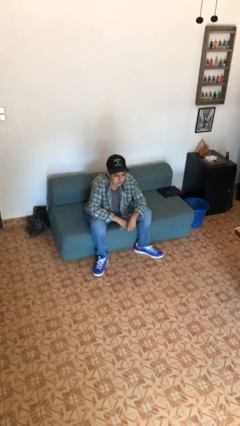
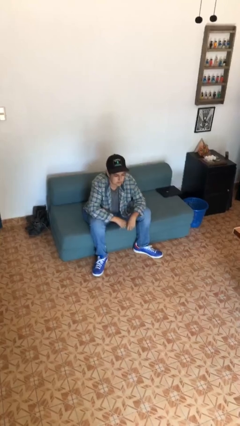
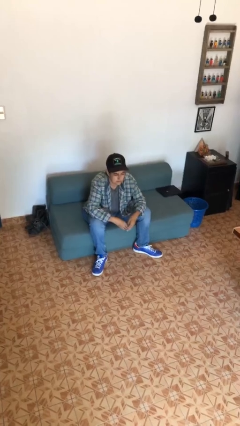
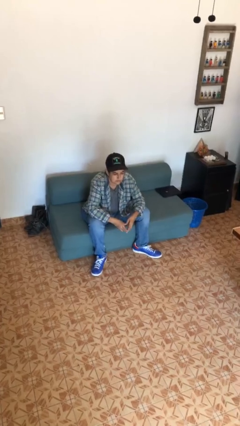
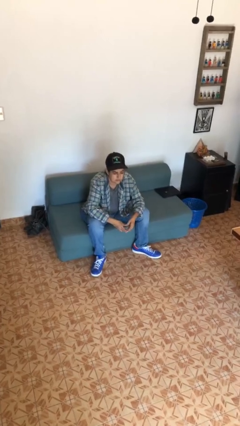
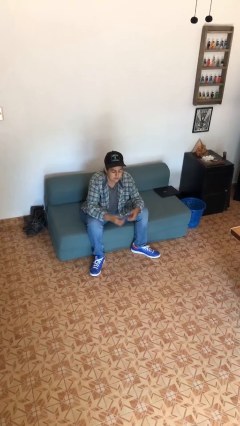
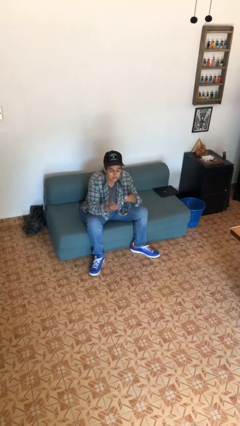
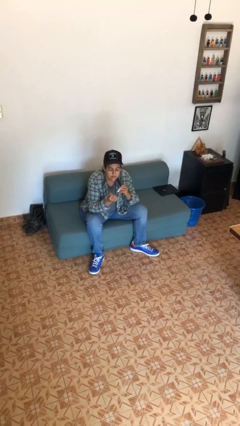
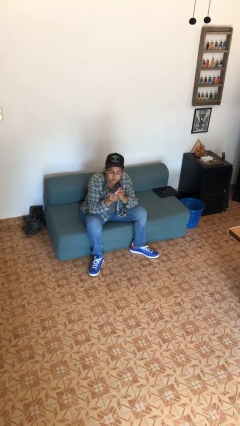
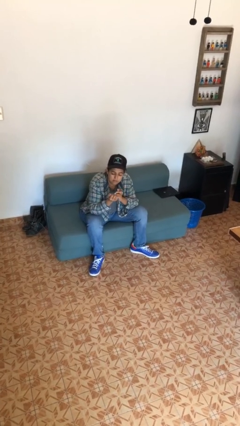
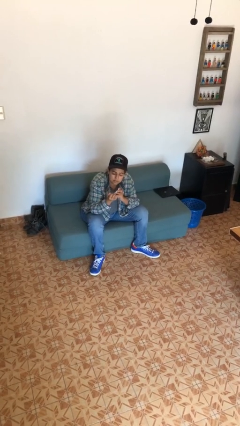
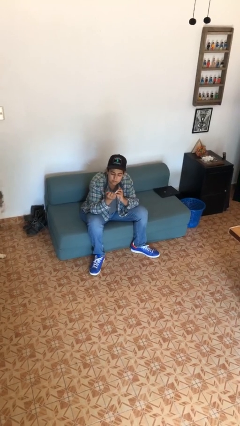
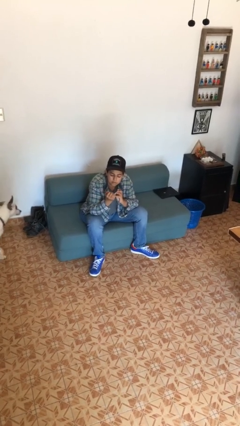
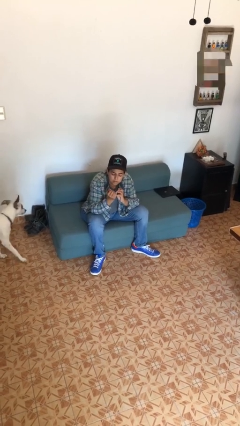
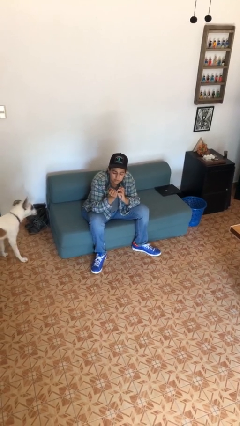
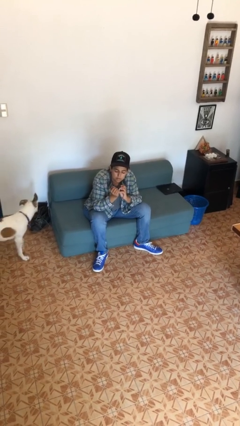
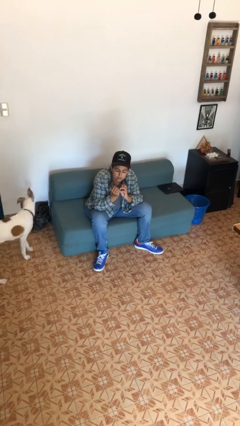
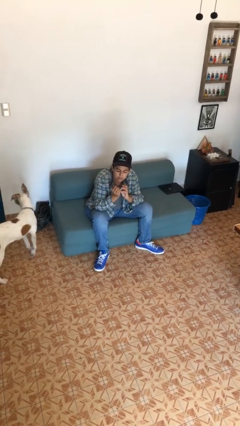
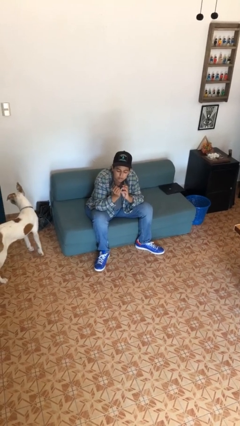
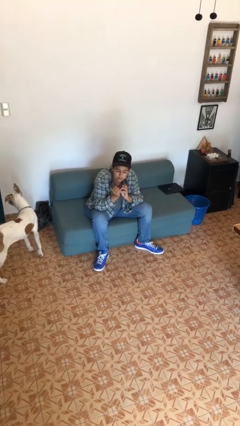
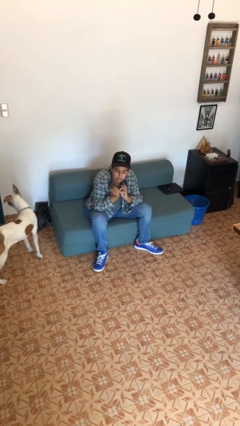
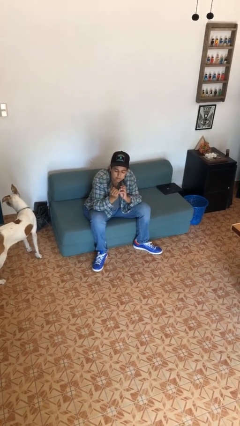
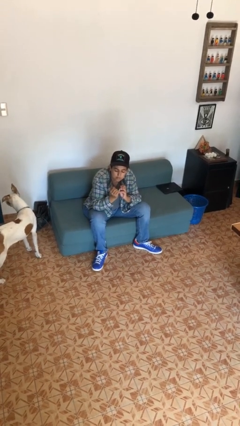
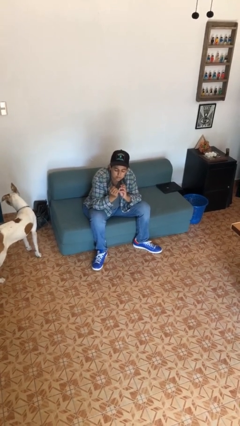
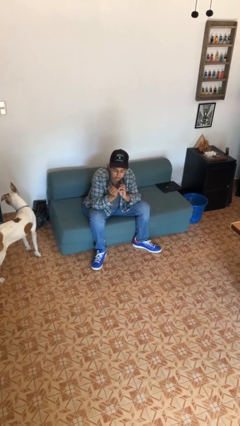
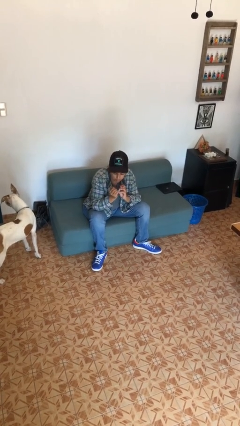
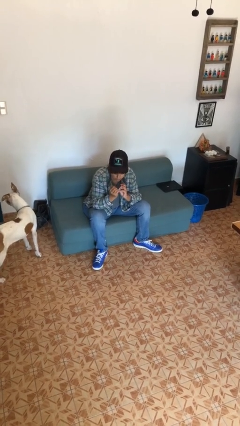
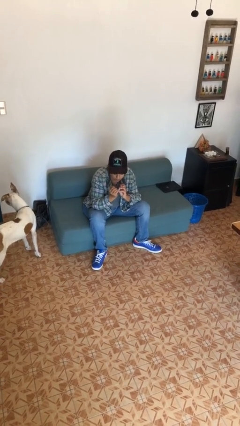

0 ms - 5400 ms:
person clips fingernails

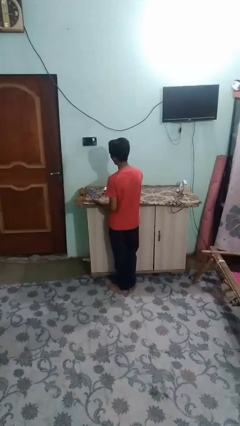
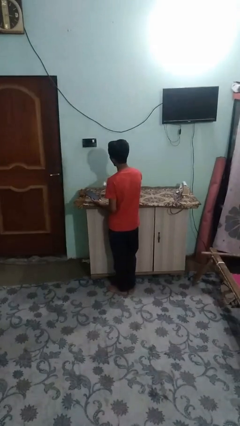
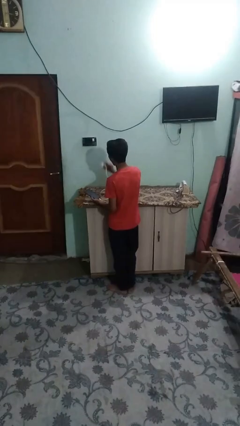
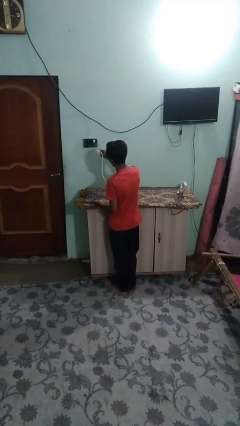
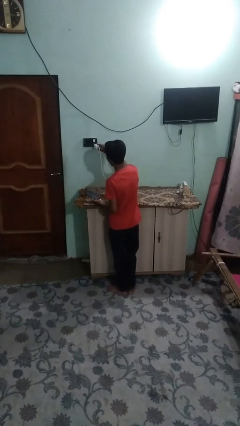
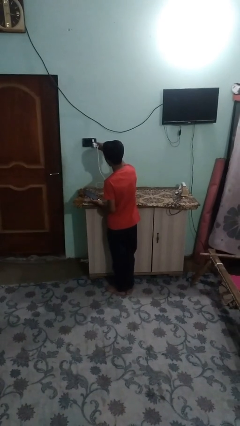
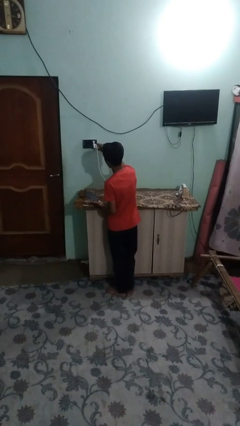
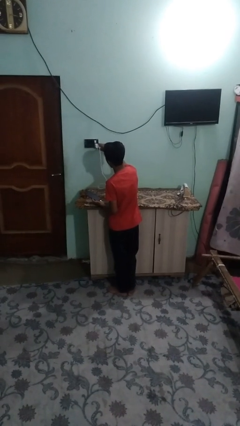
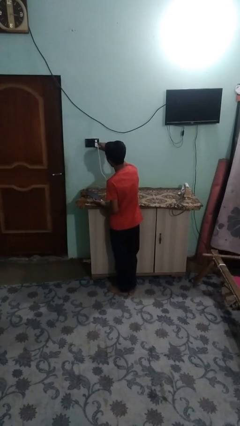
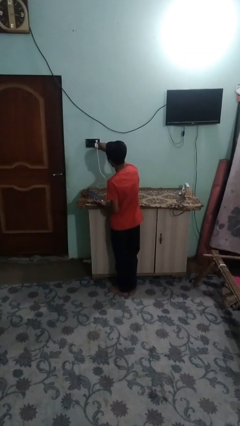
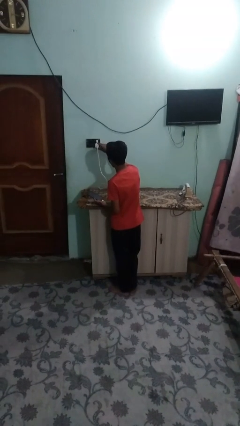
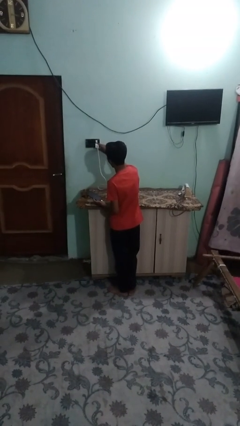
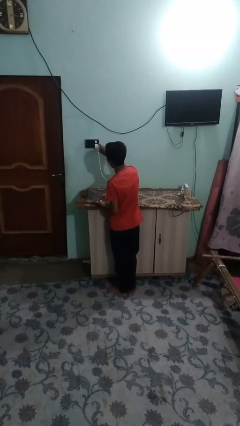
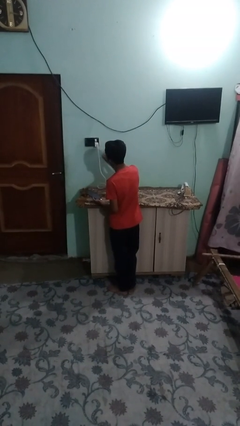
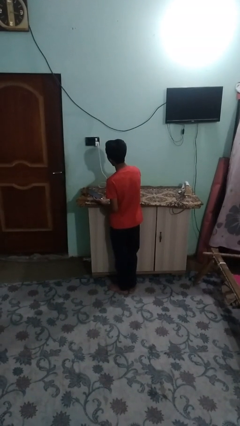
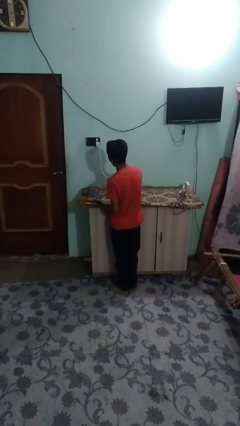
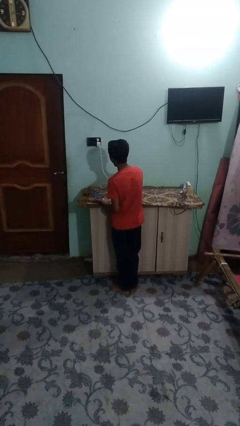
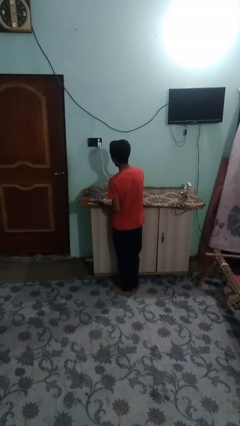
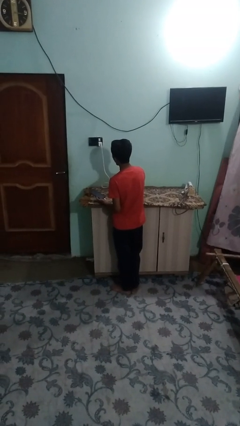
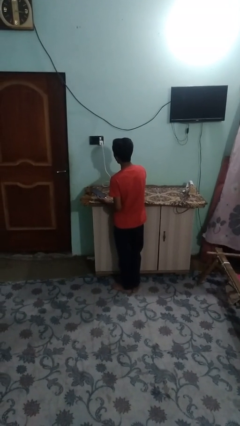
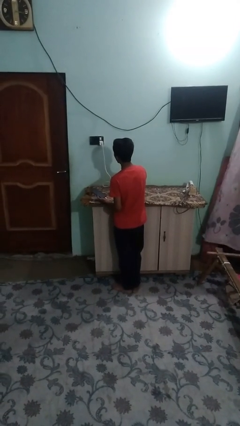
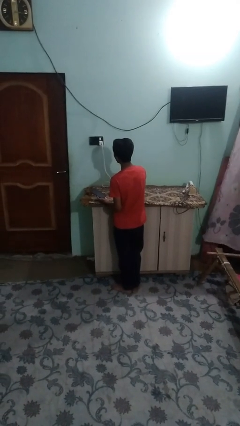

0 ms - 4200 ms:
person plugs into electrical socket

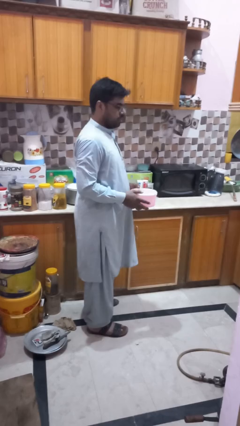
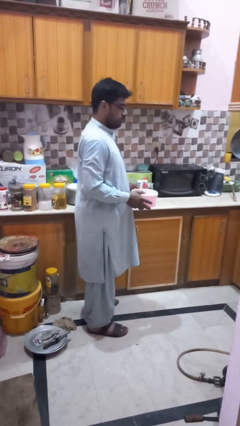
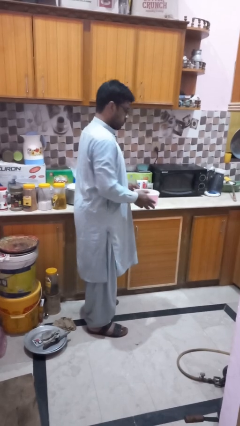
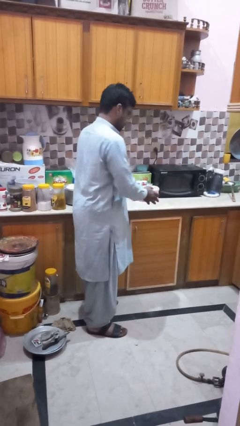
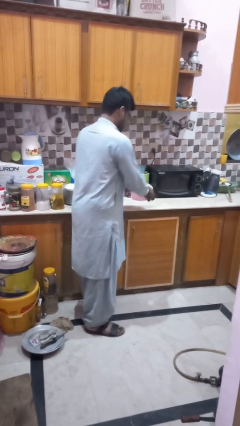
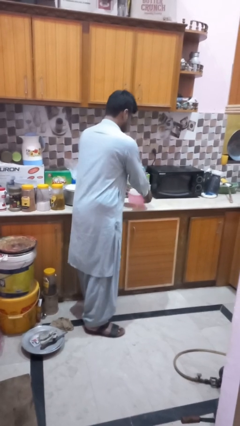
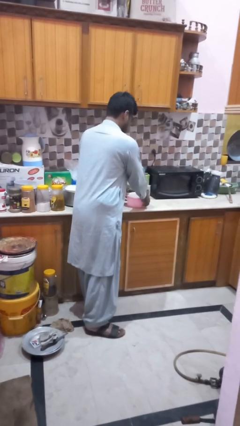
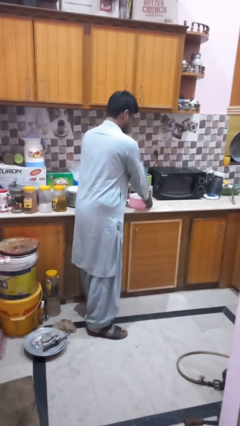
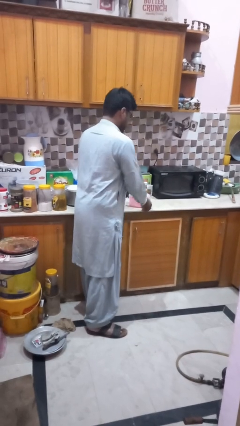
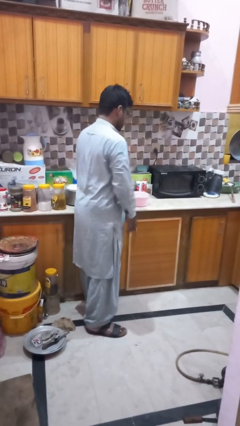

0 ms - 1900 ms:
person puts down object on countertop

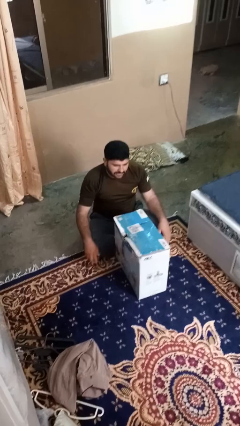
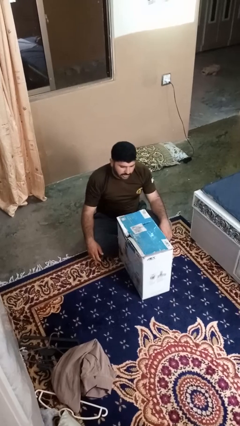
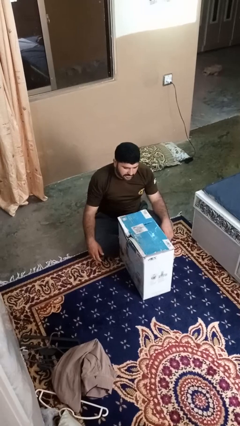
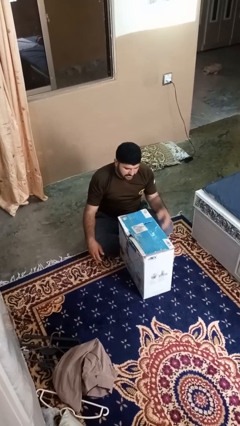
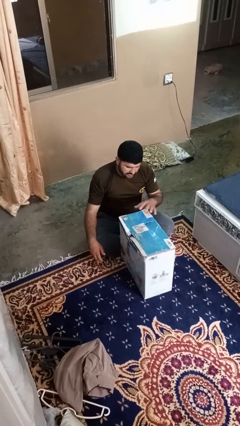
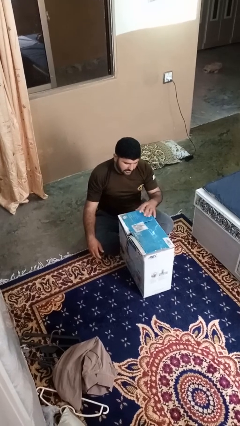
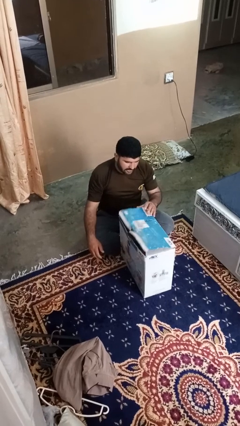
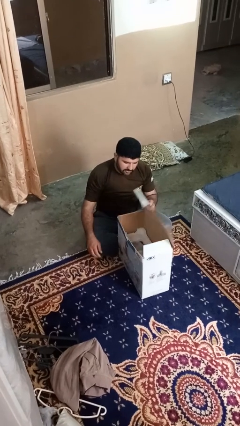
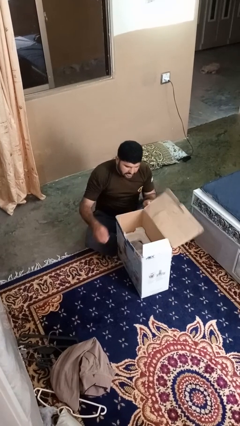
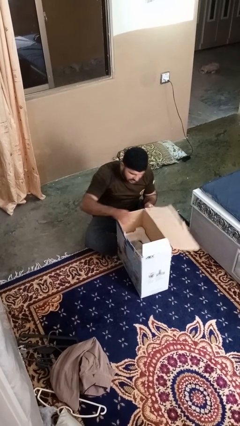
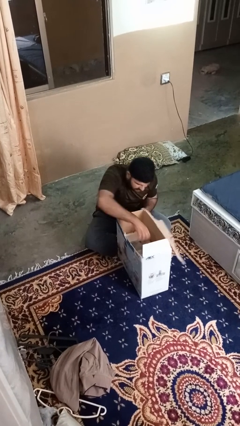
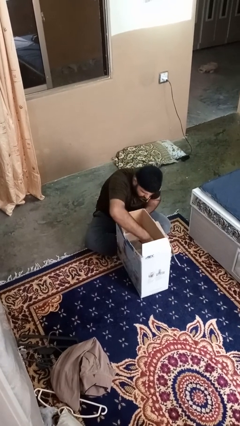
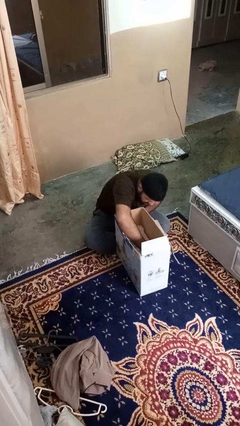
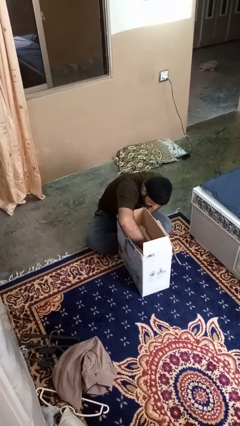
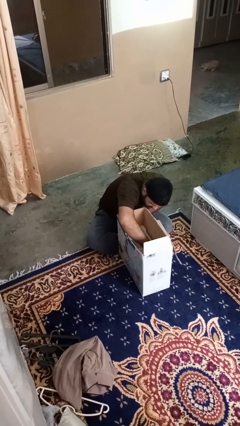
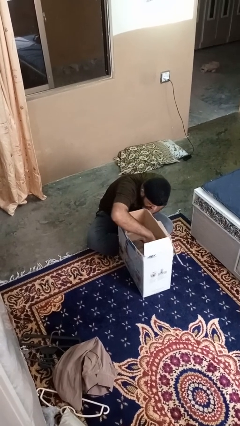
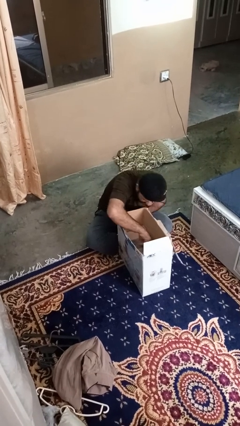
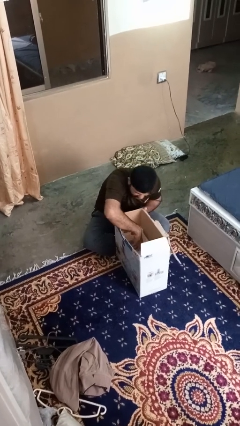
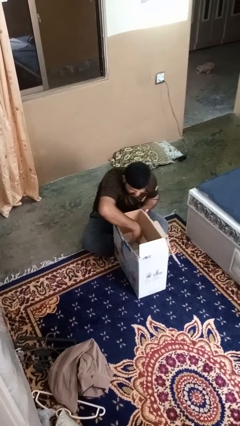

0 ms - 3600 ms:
person searches in box

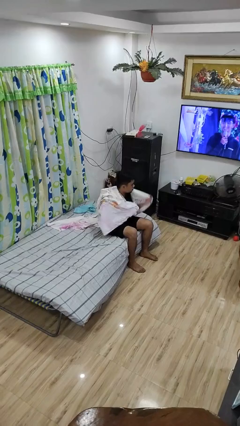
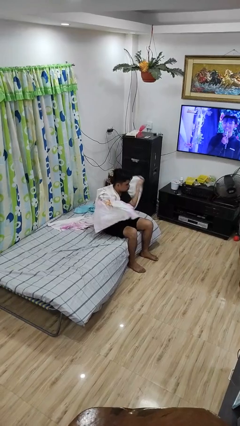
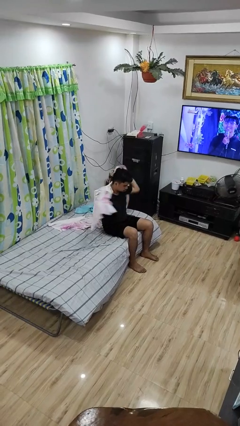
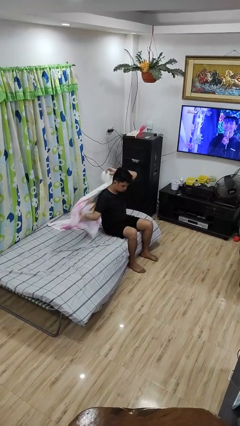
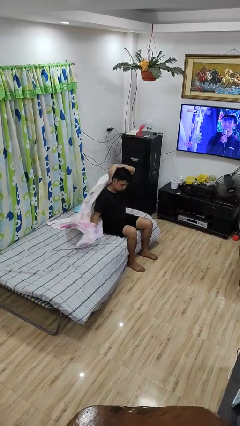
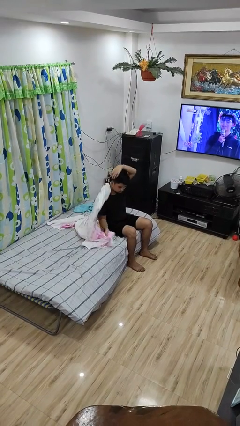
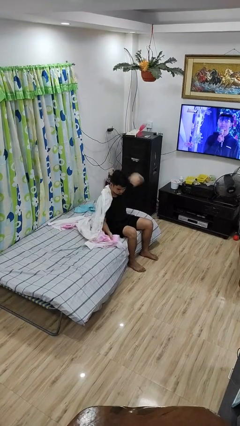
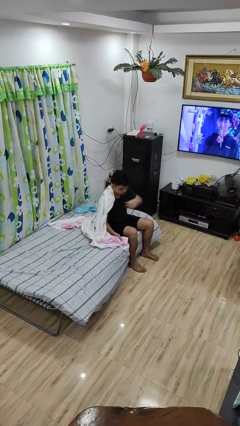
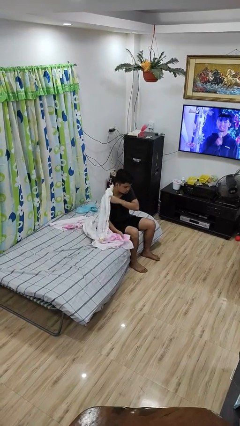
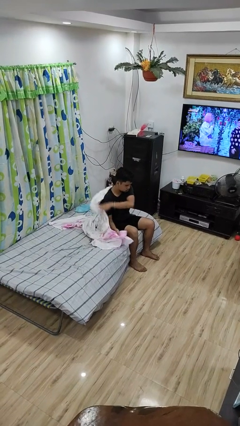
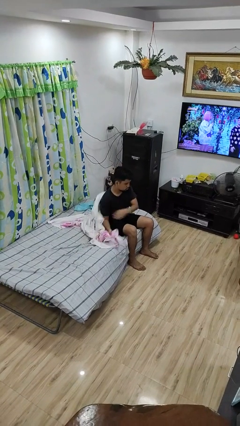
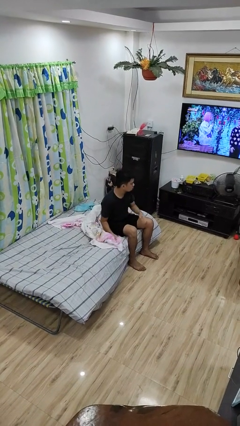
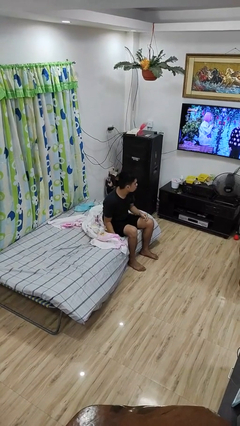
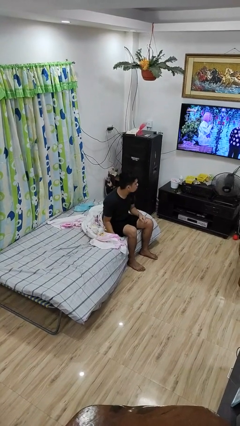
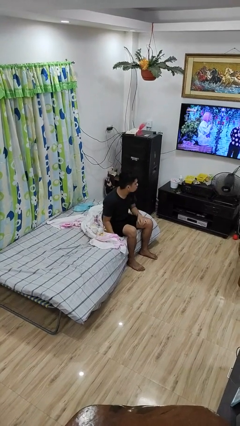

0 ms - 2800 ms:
person uncovers with blanket
